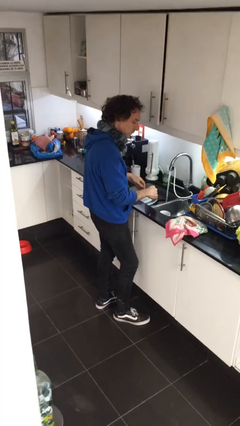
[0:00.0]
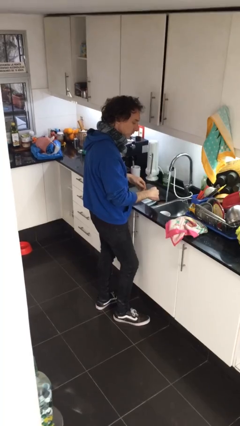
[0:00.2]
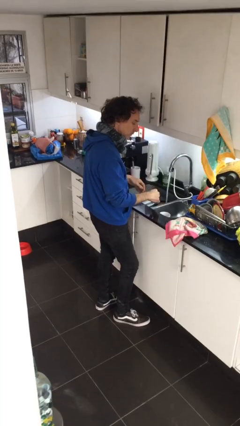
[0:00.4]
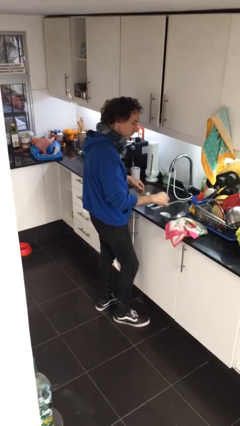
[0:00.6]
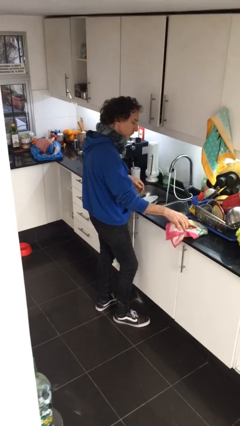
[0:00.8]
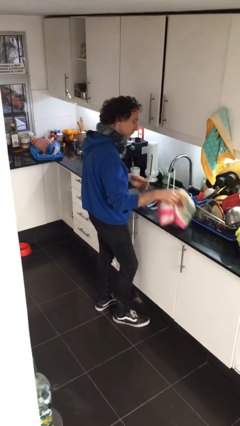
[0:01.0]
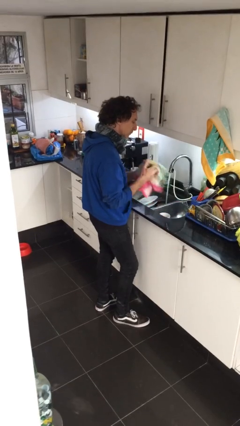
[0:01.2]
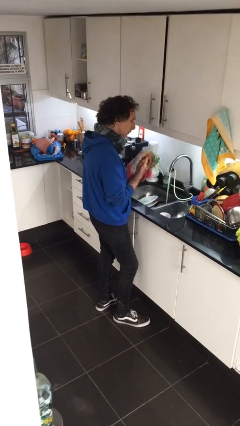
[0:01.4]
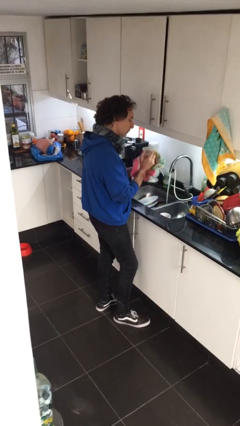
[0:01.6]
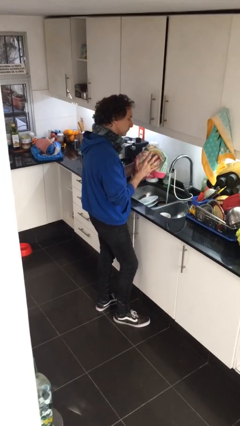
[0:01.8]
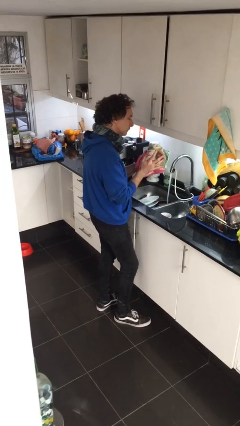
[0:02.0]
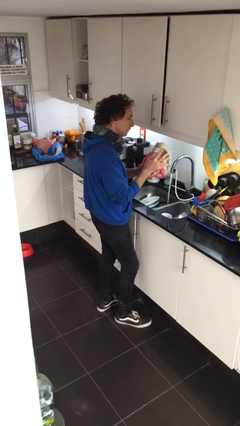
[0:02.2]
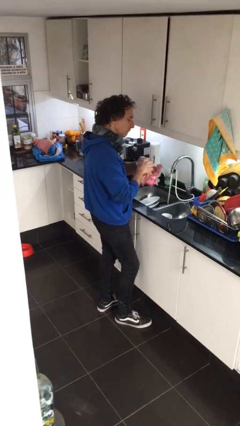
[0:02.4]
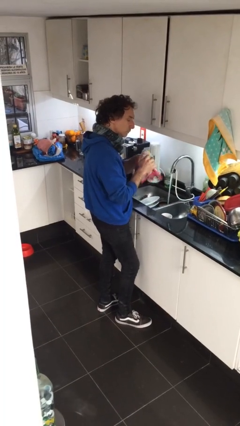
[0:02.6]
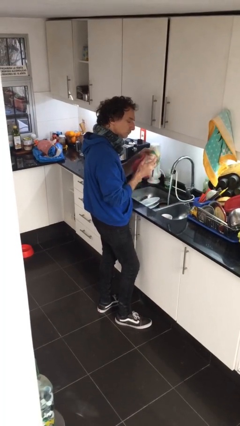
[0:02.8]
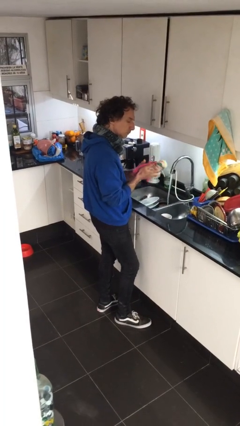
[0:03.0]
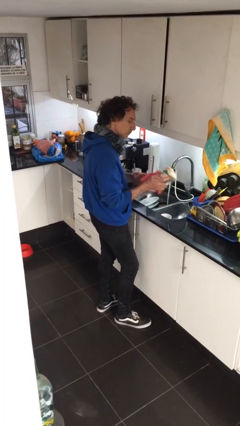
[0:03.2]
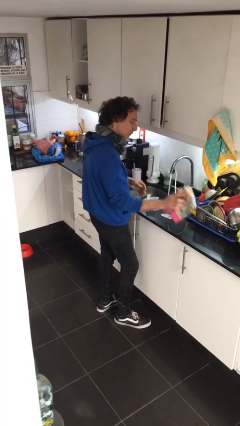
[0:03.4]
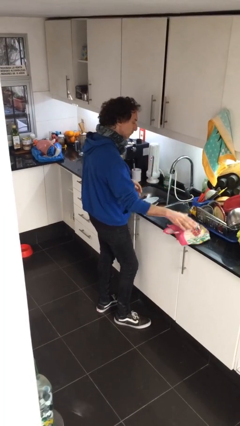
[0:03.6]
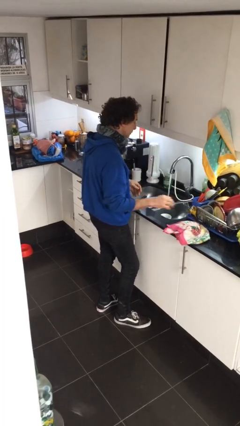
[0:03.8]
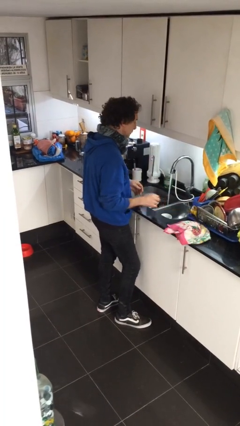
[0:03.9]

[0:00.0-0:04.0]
person dries hands with towel

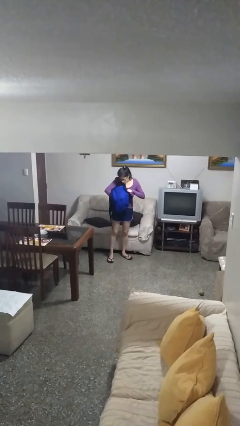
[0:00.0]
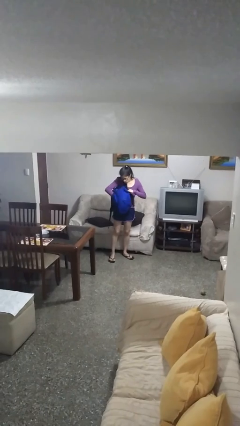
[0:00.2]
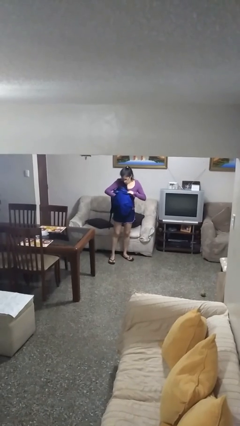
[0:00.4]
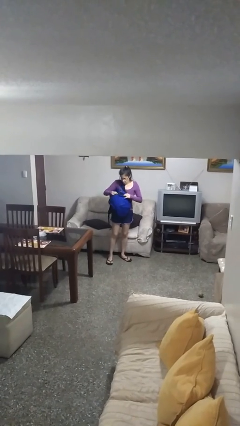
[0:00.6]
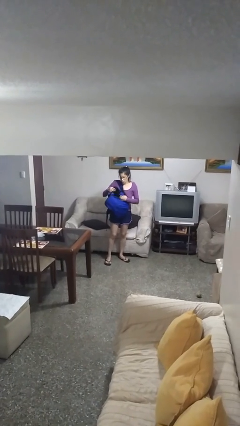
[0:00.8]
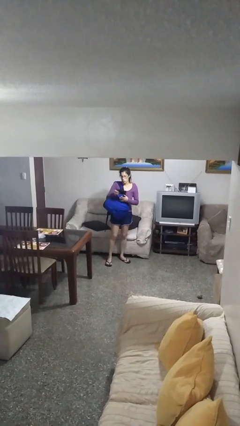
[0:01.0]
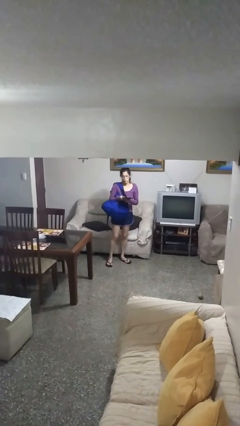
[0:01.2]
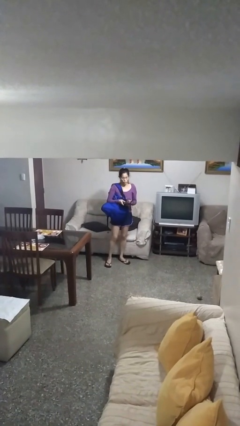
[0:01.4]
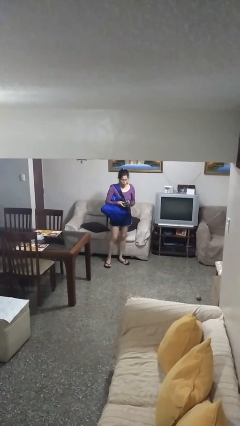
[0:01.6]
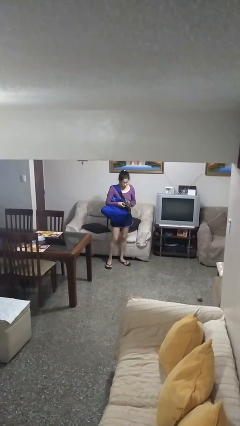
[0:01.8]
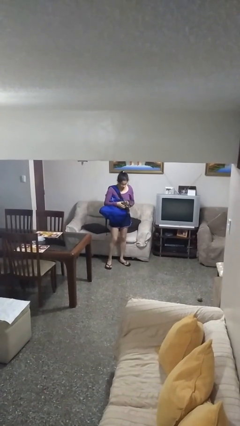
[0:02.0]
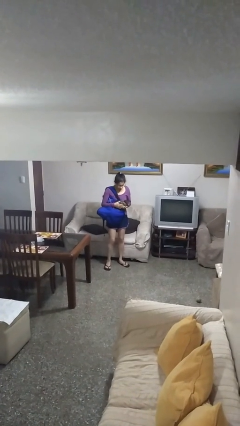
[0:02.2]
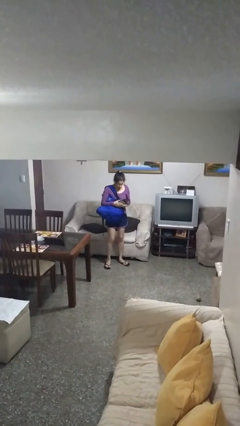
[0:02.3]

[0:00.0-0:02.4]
person takes object from backpack

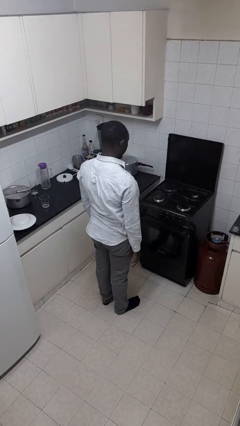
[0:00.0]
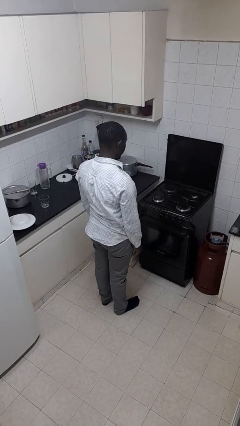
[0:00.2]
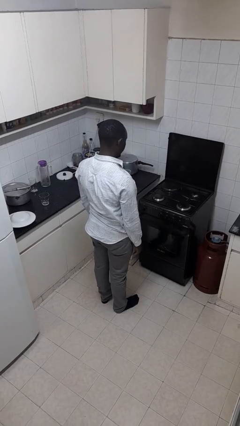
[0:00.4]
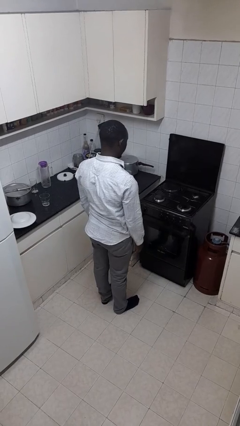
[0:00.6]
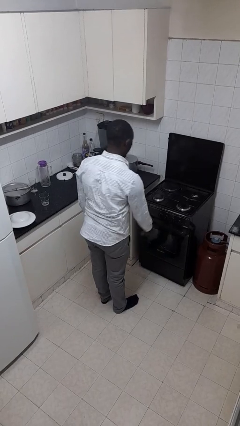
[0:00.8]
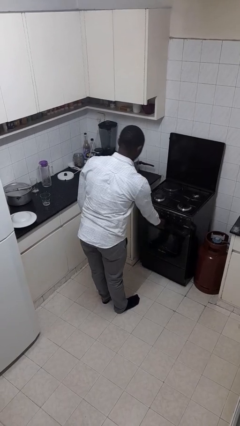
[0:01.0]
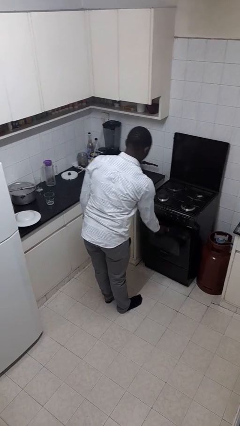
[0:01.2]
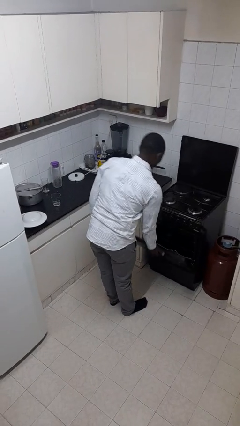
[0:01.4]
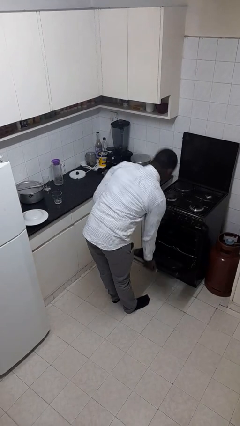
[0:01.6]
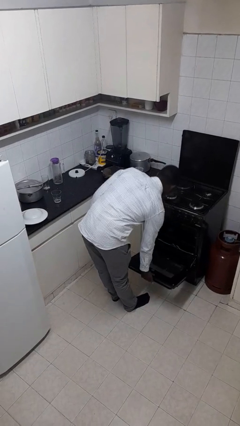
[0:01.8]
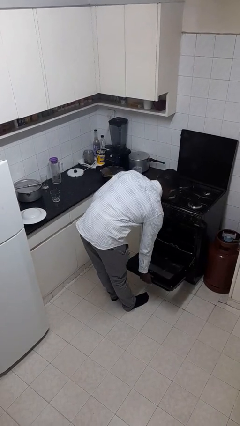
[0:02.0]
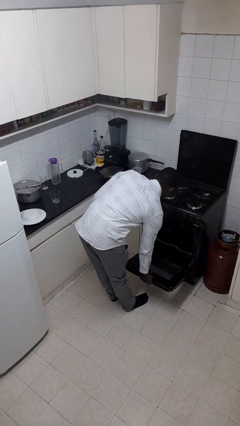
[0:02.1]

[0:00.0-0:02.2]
person opens oven door

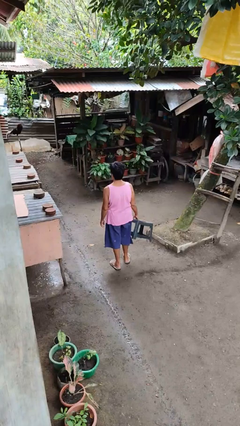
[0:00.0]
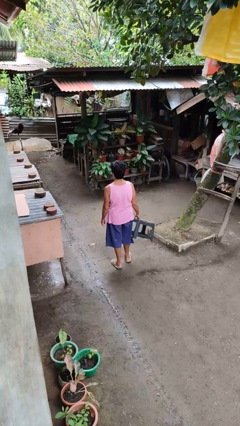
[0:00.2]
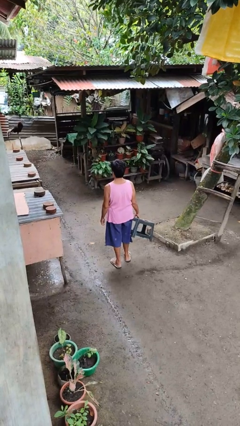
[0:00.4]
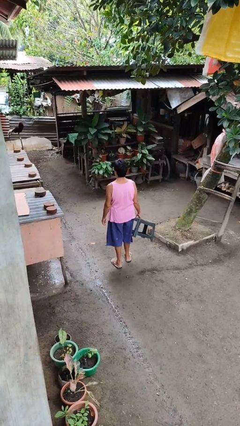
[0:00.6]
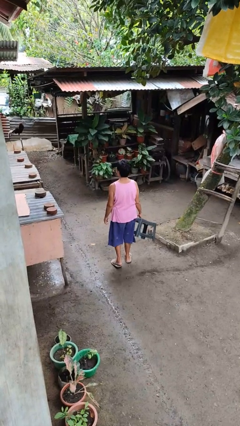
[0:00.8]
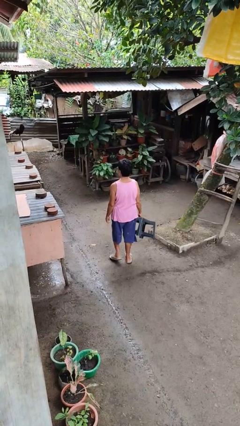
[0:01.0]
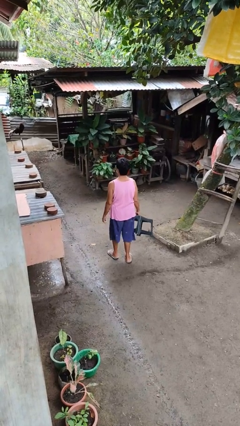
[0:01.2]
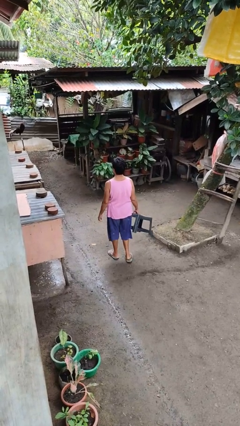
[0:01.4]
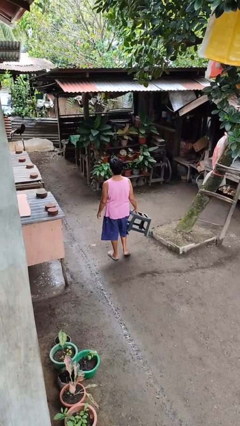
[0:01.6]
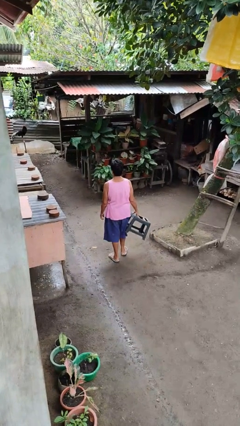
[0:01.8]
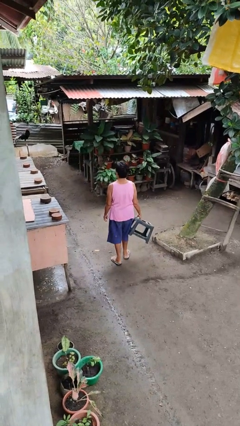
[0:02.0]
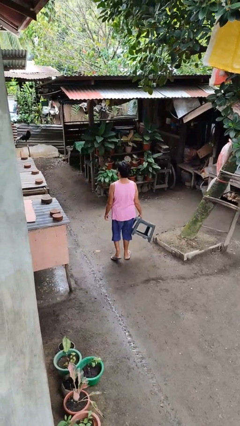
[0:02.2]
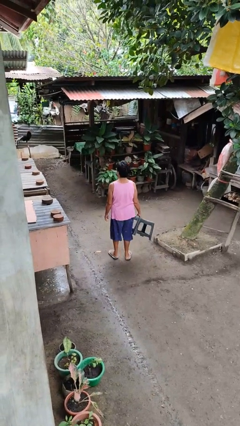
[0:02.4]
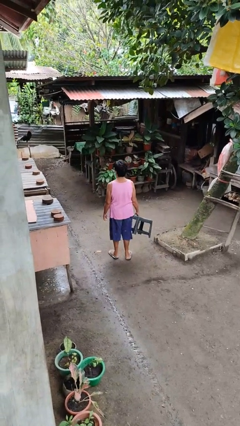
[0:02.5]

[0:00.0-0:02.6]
person carries furniture

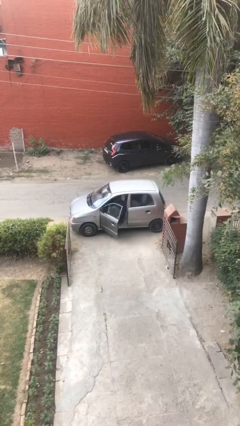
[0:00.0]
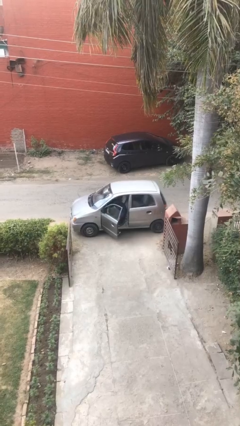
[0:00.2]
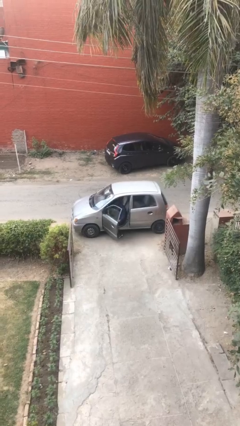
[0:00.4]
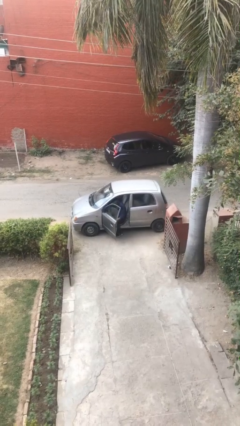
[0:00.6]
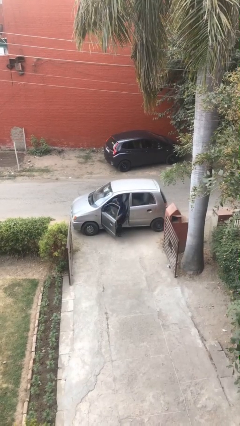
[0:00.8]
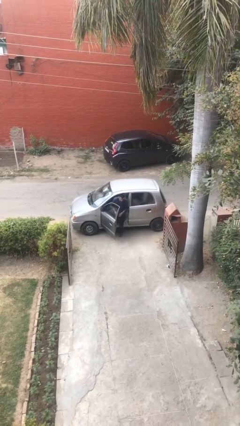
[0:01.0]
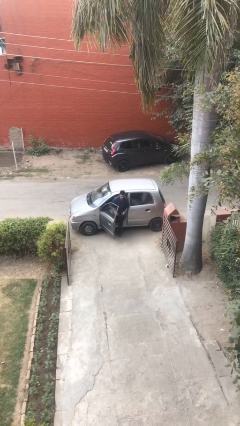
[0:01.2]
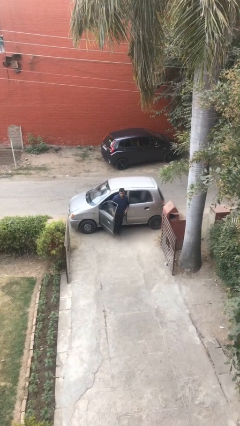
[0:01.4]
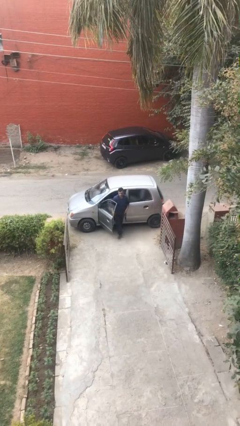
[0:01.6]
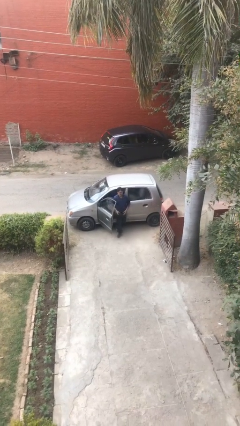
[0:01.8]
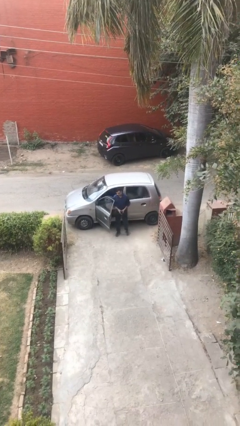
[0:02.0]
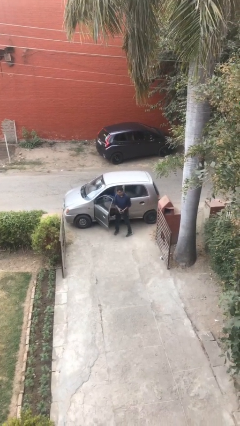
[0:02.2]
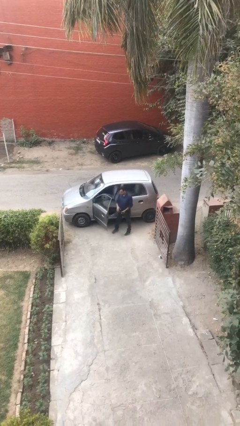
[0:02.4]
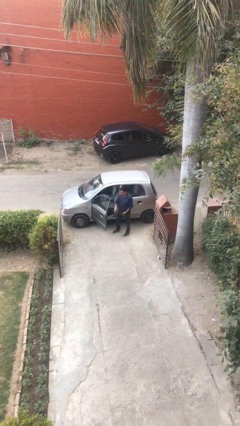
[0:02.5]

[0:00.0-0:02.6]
person exits car

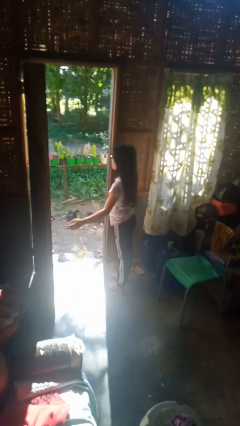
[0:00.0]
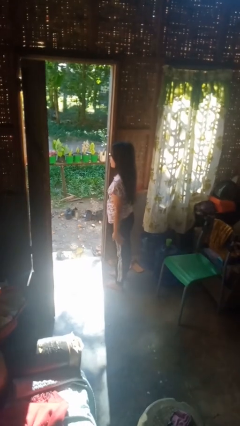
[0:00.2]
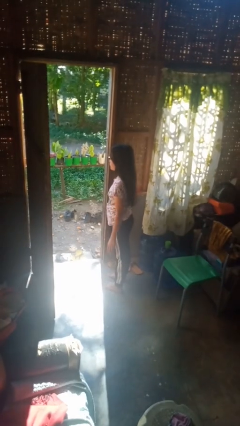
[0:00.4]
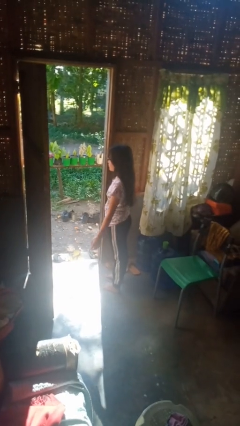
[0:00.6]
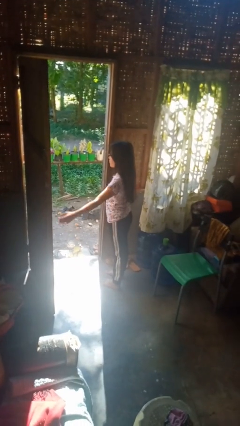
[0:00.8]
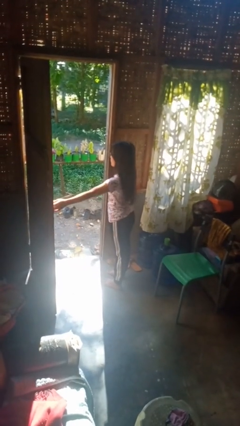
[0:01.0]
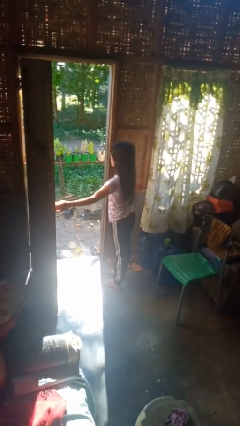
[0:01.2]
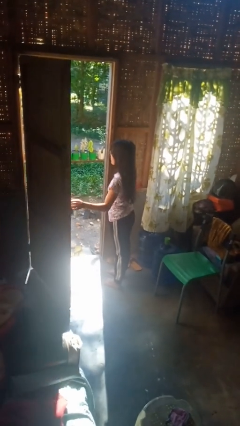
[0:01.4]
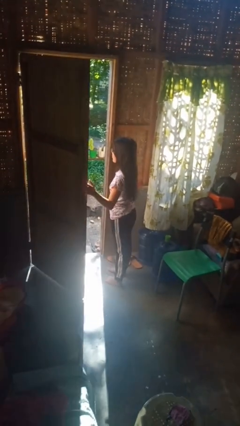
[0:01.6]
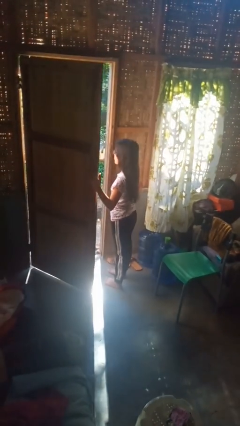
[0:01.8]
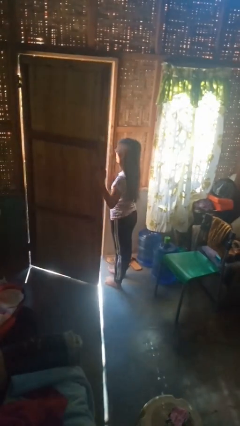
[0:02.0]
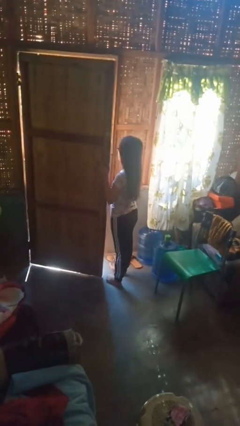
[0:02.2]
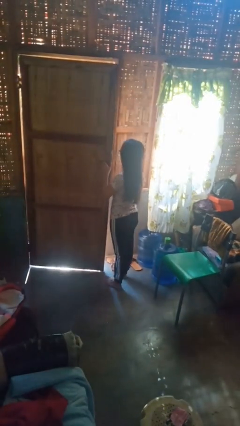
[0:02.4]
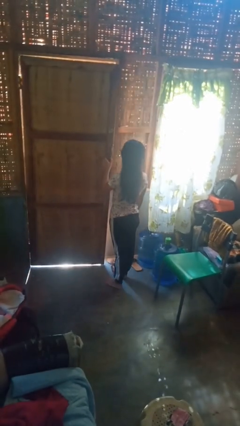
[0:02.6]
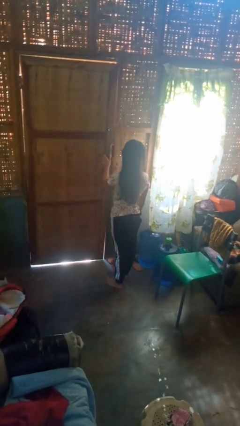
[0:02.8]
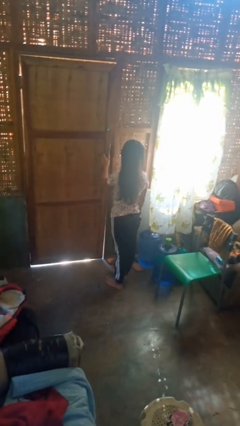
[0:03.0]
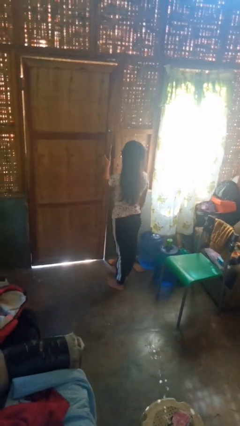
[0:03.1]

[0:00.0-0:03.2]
person closes facility door
